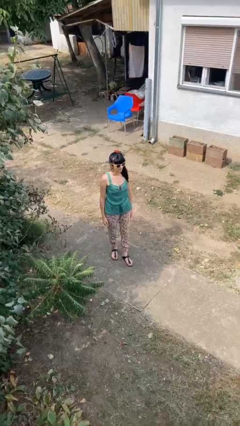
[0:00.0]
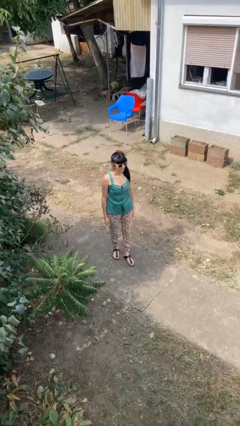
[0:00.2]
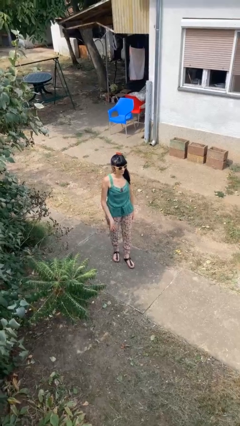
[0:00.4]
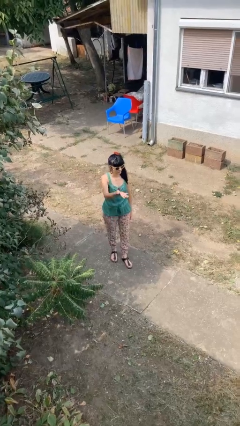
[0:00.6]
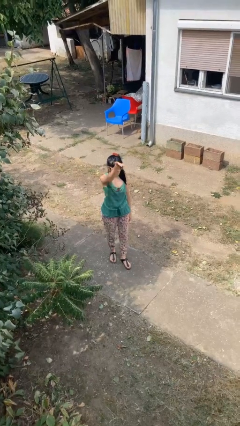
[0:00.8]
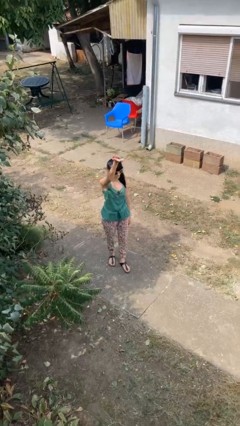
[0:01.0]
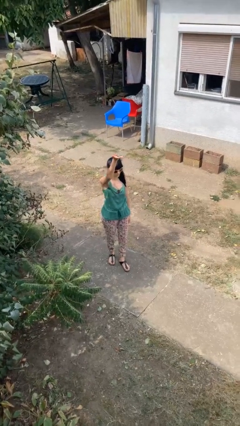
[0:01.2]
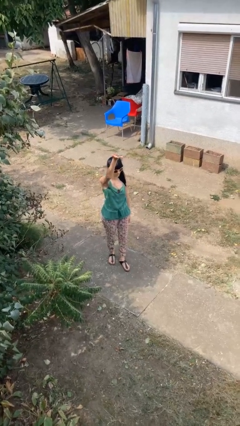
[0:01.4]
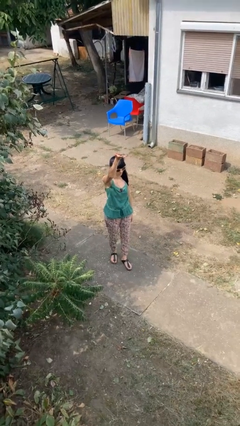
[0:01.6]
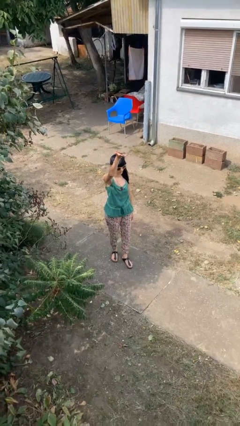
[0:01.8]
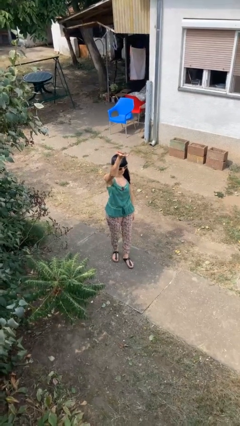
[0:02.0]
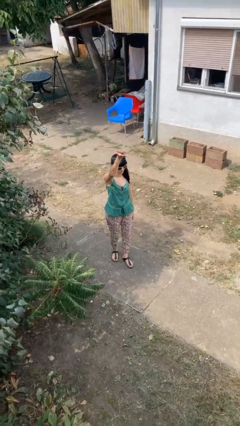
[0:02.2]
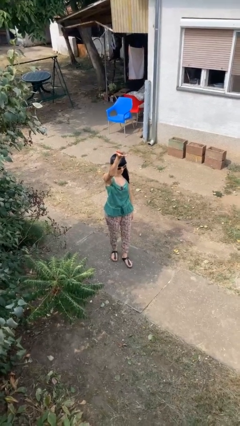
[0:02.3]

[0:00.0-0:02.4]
person gestures swipe up

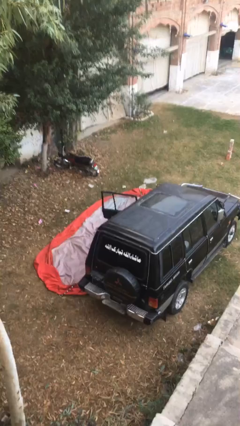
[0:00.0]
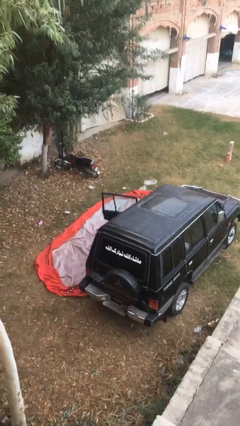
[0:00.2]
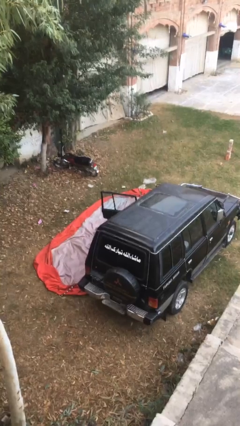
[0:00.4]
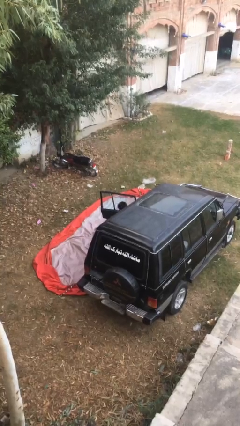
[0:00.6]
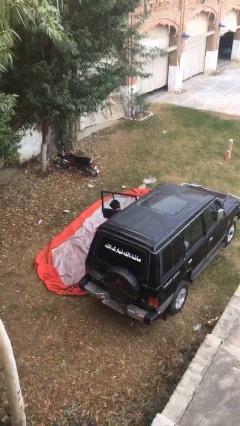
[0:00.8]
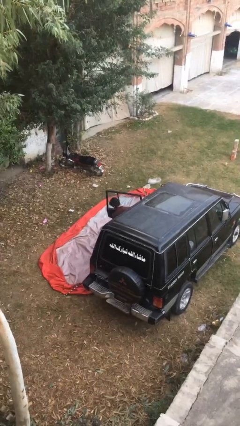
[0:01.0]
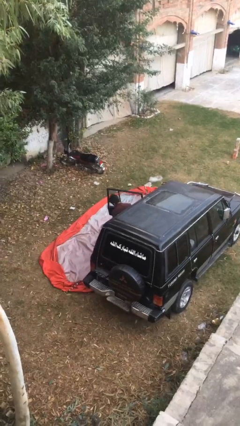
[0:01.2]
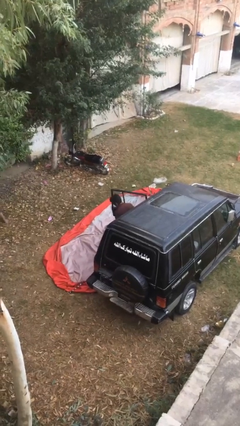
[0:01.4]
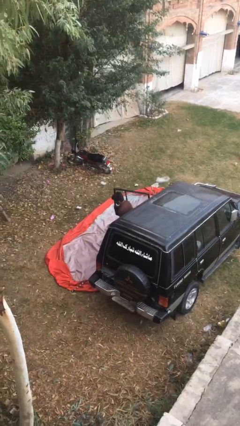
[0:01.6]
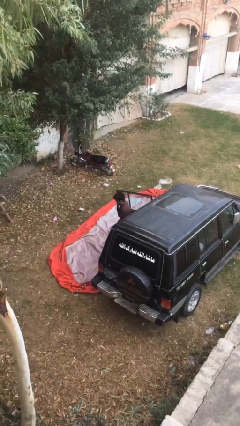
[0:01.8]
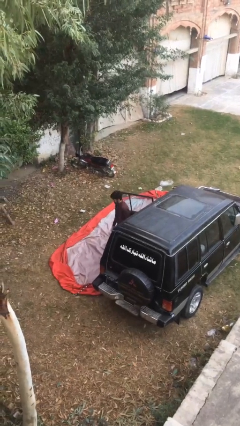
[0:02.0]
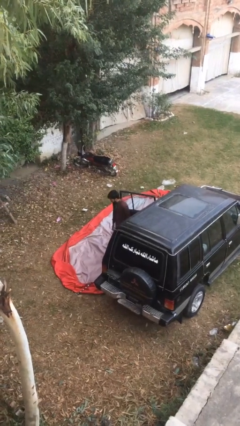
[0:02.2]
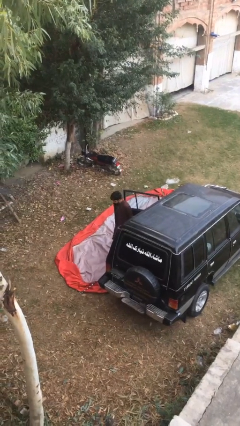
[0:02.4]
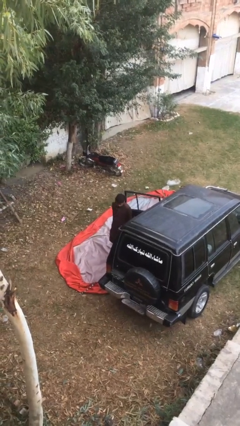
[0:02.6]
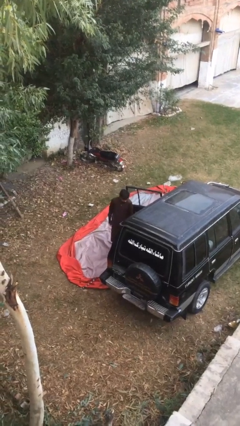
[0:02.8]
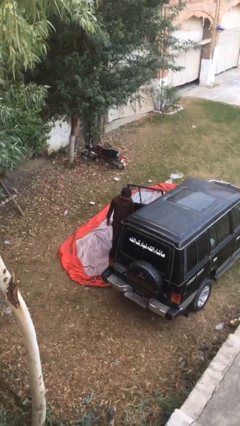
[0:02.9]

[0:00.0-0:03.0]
person exits car

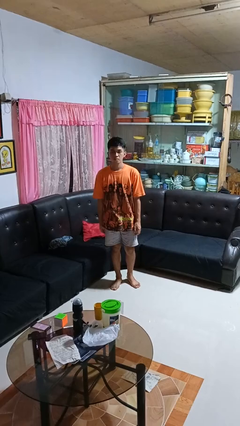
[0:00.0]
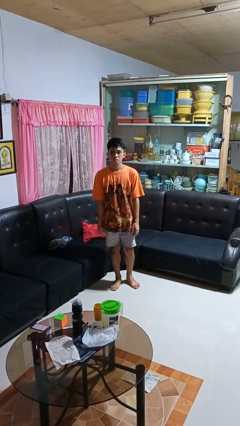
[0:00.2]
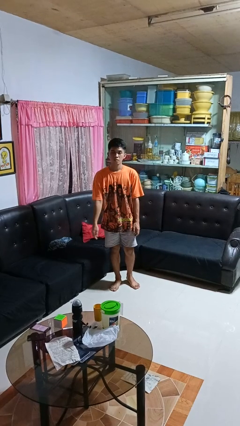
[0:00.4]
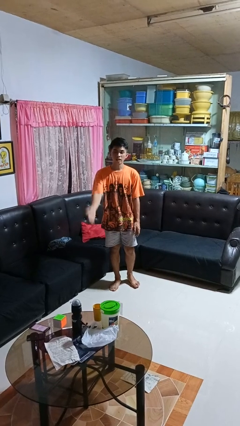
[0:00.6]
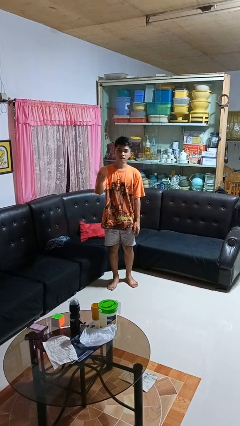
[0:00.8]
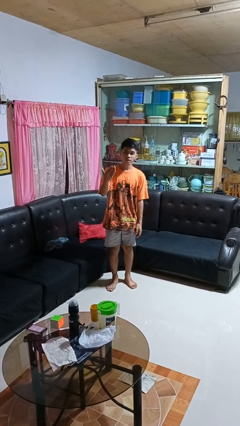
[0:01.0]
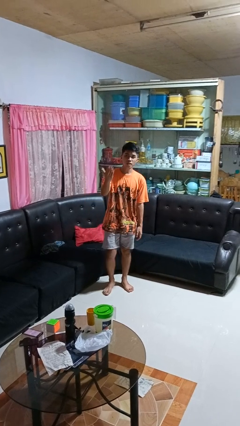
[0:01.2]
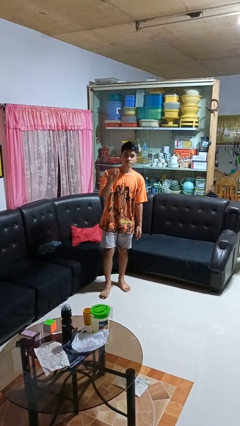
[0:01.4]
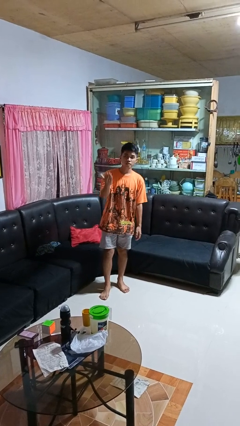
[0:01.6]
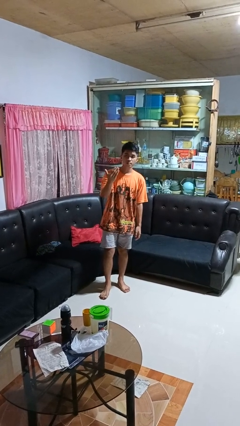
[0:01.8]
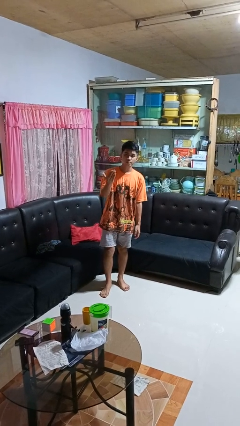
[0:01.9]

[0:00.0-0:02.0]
person gestures come here

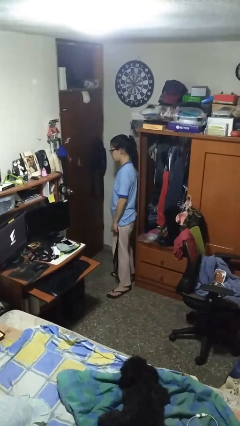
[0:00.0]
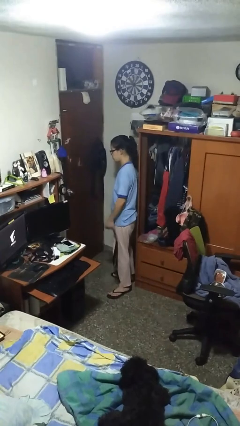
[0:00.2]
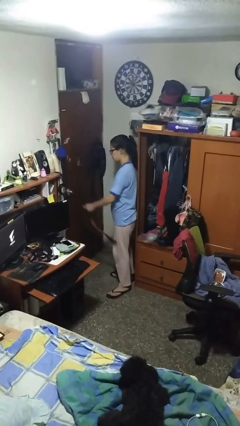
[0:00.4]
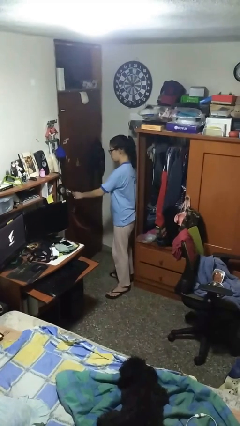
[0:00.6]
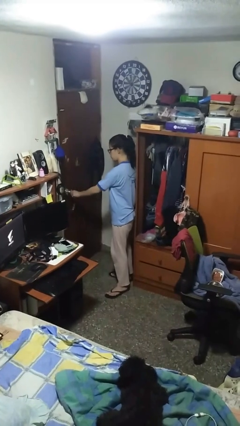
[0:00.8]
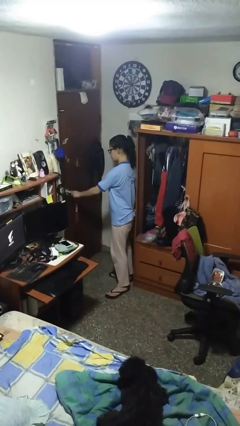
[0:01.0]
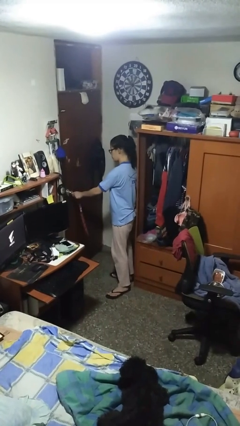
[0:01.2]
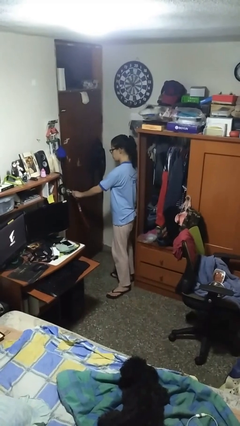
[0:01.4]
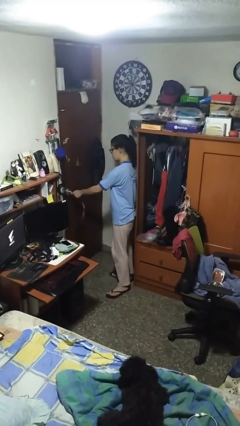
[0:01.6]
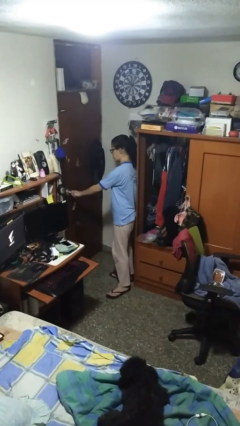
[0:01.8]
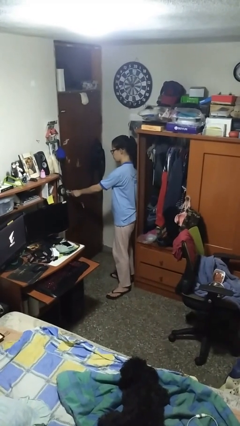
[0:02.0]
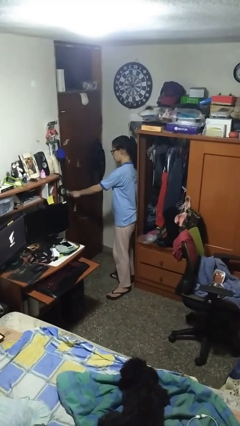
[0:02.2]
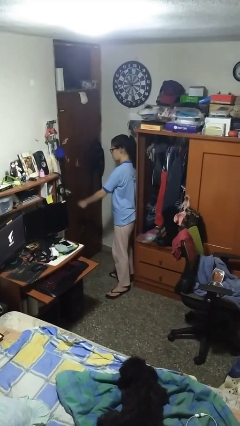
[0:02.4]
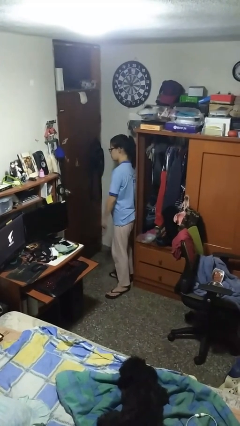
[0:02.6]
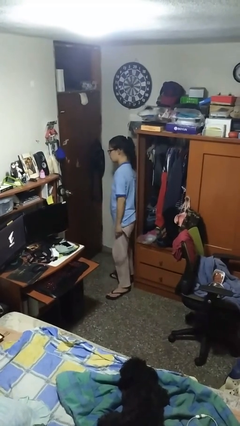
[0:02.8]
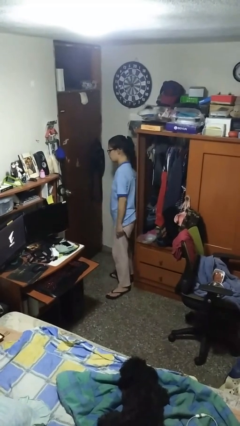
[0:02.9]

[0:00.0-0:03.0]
person unlocks door with keys

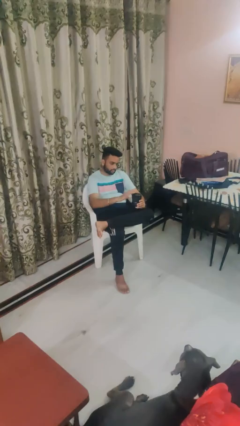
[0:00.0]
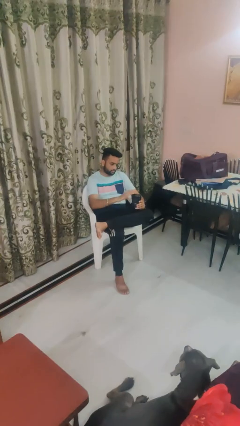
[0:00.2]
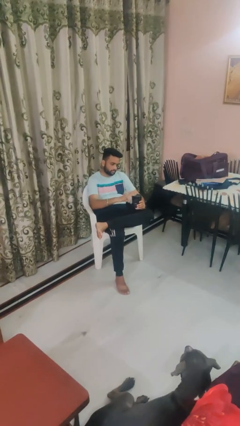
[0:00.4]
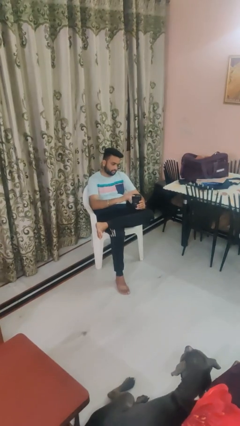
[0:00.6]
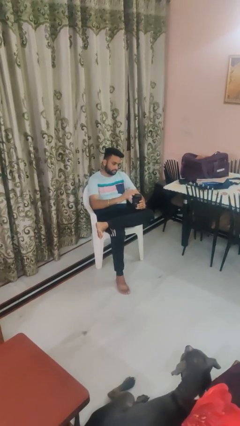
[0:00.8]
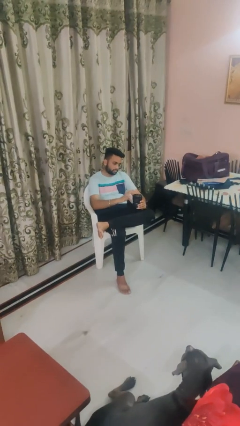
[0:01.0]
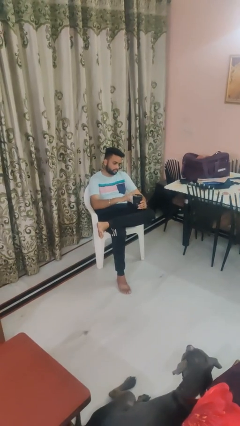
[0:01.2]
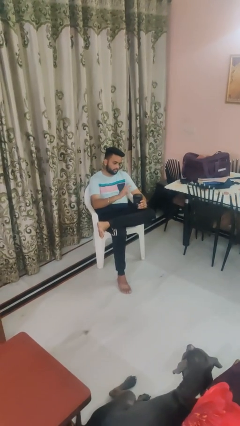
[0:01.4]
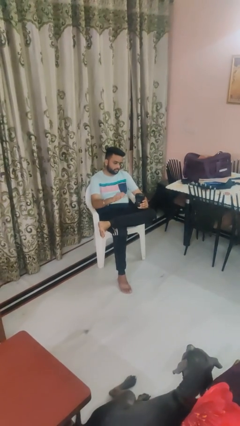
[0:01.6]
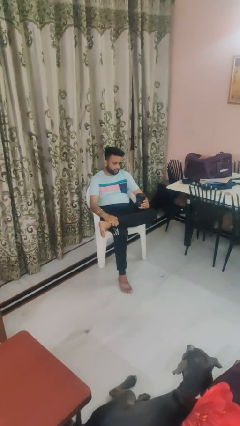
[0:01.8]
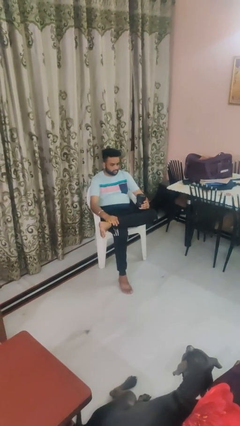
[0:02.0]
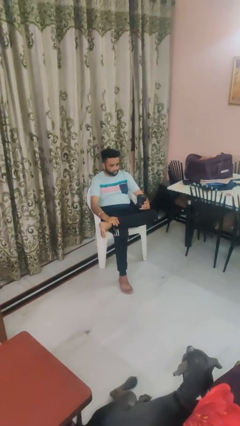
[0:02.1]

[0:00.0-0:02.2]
person taps object with finger

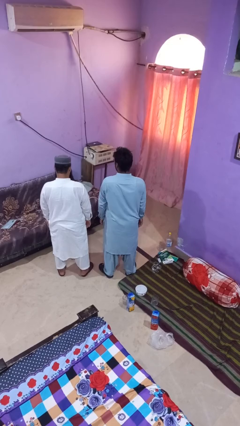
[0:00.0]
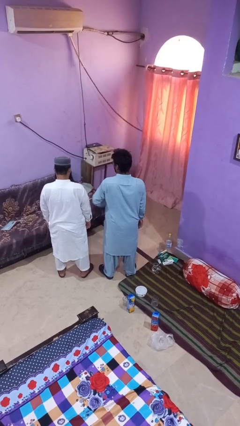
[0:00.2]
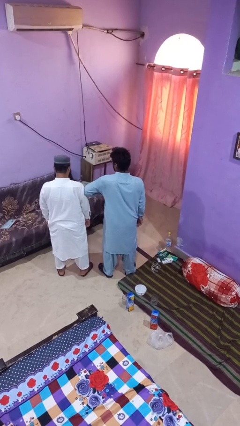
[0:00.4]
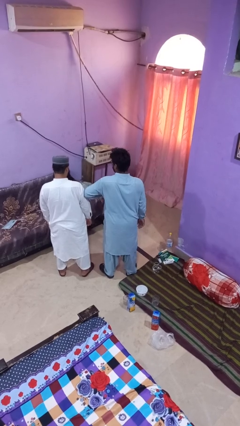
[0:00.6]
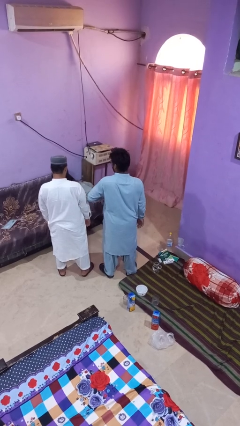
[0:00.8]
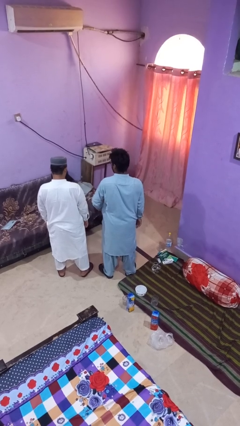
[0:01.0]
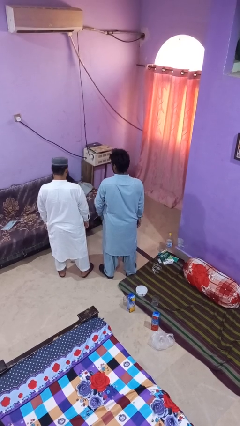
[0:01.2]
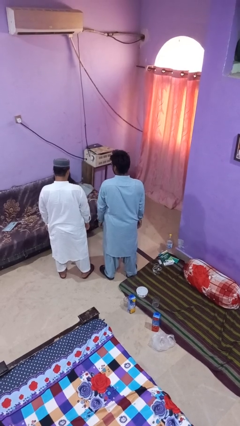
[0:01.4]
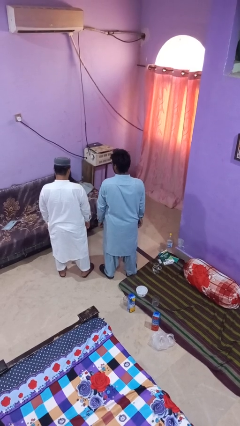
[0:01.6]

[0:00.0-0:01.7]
person nudges person with elbow

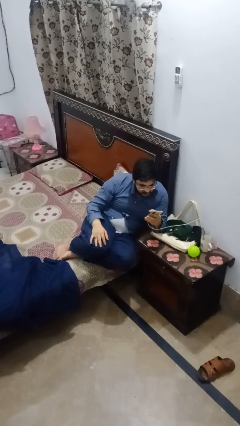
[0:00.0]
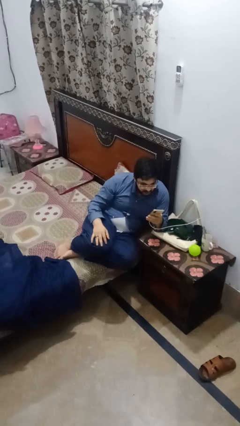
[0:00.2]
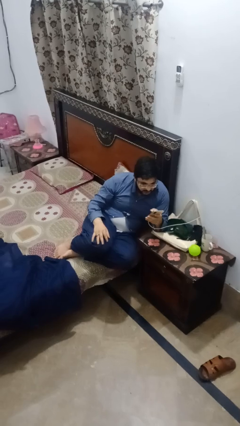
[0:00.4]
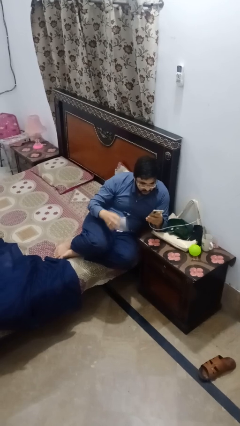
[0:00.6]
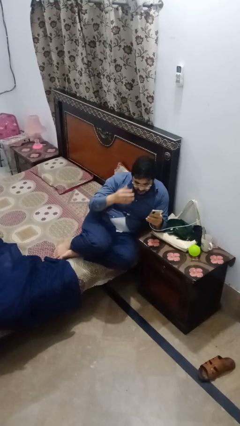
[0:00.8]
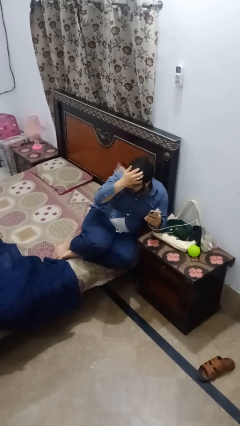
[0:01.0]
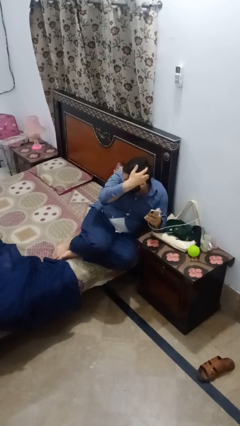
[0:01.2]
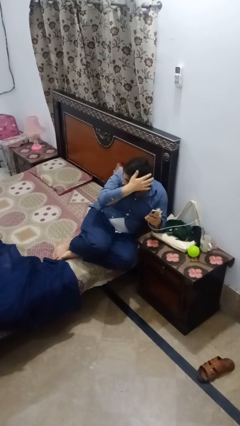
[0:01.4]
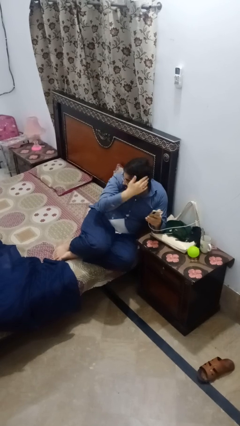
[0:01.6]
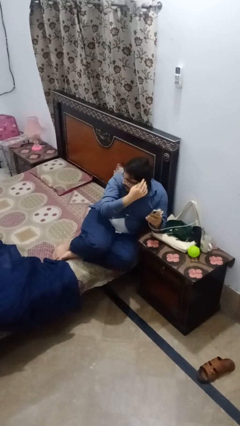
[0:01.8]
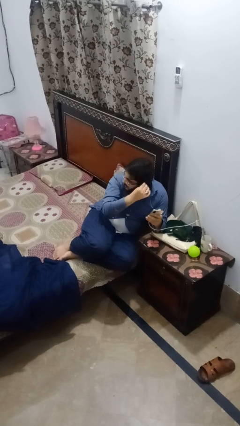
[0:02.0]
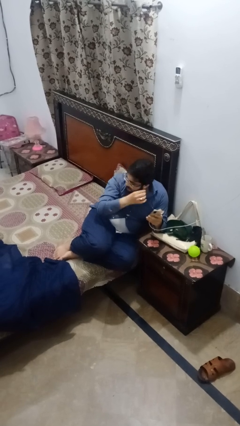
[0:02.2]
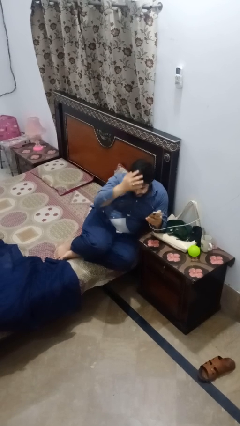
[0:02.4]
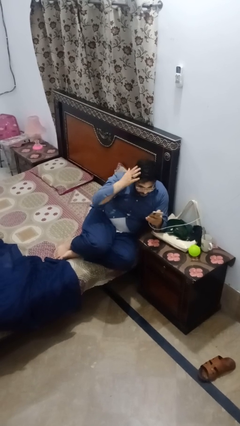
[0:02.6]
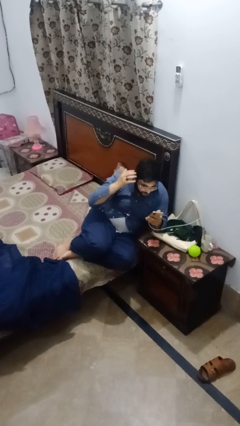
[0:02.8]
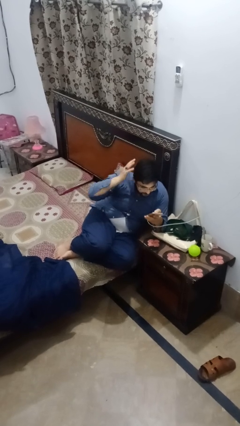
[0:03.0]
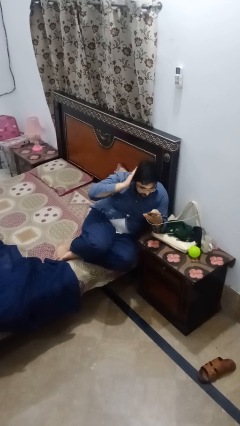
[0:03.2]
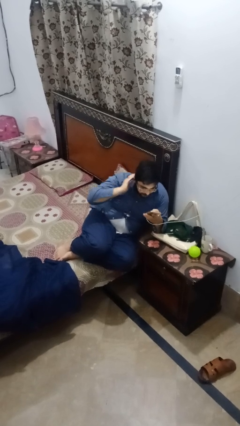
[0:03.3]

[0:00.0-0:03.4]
person strokes hair
